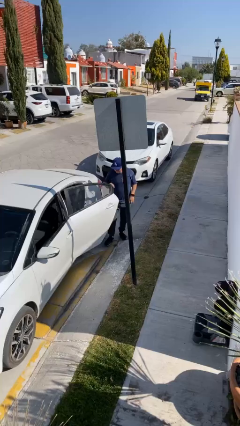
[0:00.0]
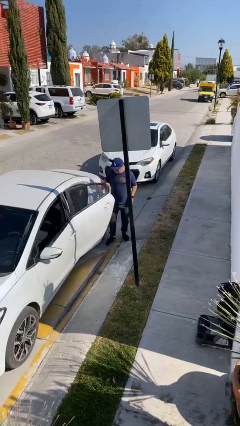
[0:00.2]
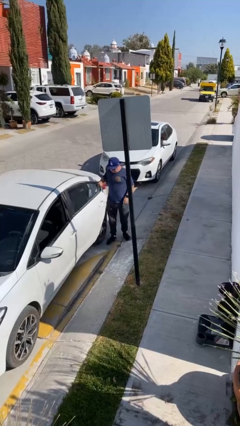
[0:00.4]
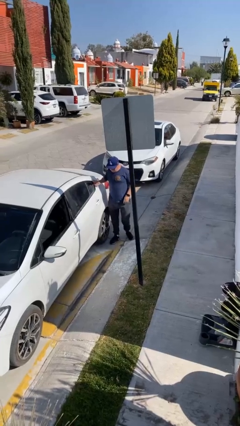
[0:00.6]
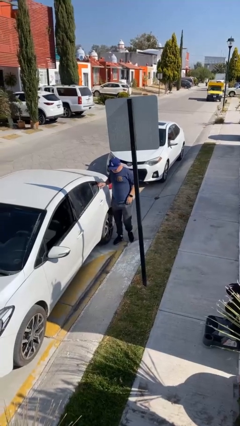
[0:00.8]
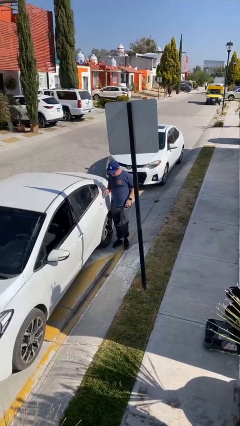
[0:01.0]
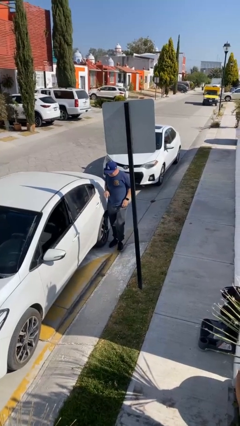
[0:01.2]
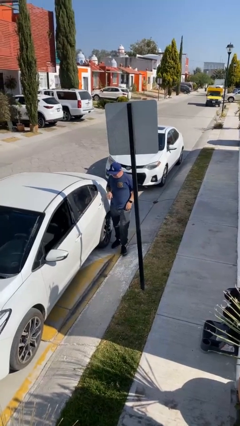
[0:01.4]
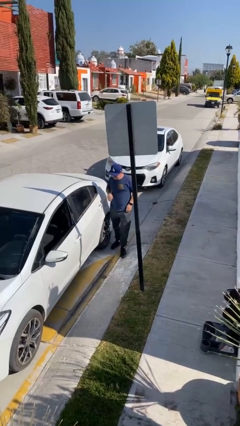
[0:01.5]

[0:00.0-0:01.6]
person closes car door

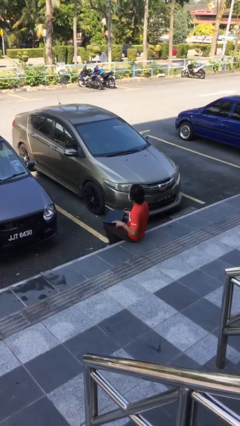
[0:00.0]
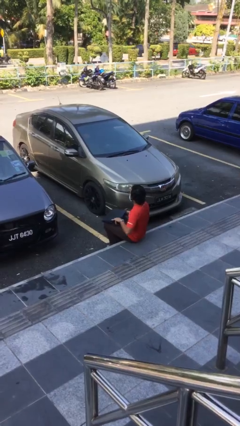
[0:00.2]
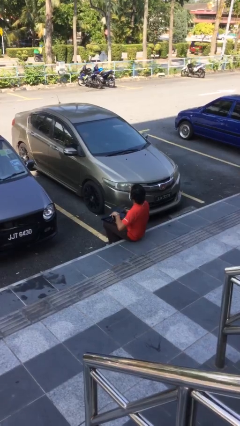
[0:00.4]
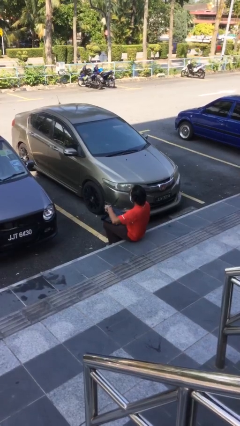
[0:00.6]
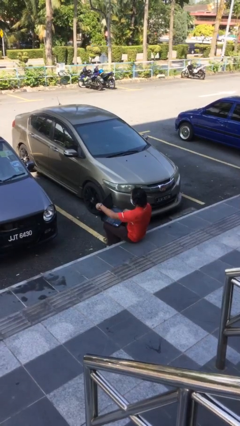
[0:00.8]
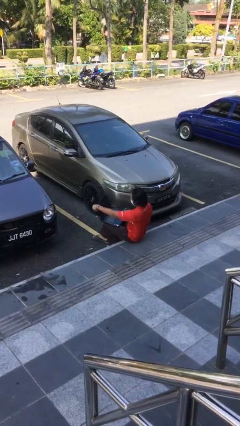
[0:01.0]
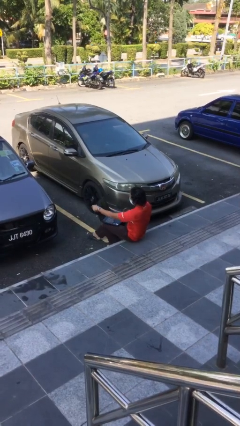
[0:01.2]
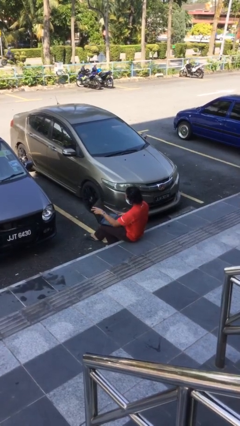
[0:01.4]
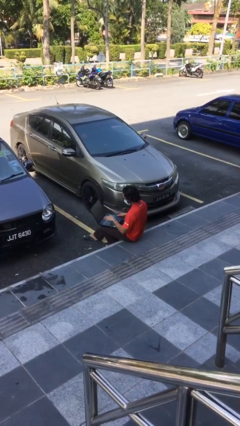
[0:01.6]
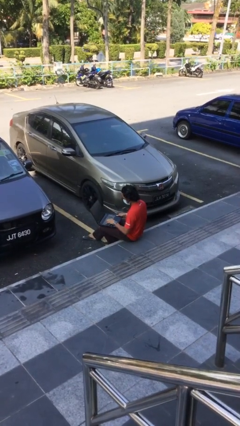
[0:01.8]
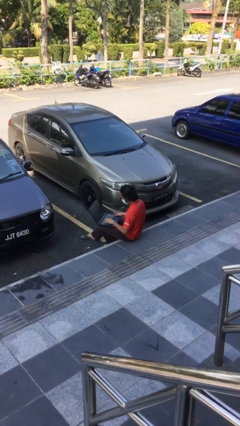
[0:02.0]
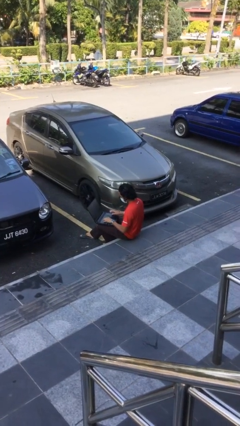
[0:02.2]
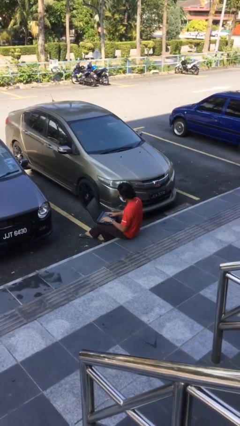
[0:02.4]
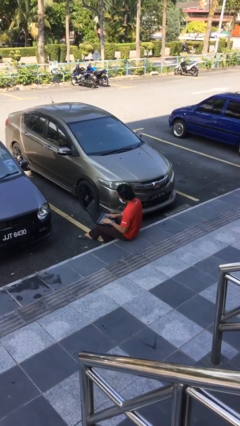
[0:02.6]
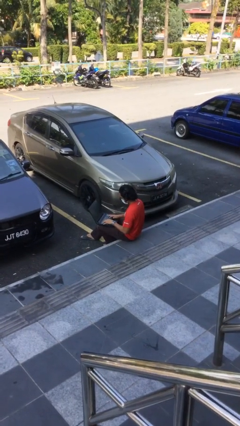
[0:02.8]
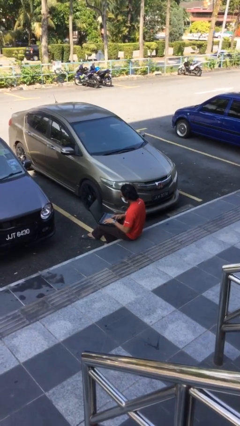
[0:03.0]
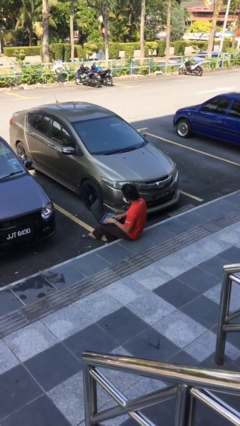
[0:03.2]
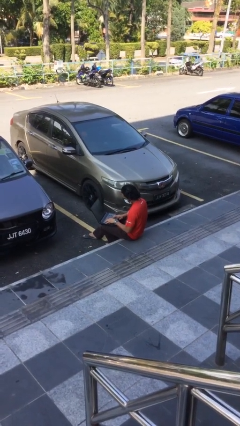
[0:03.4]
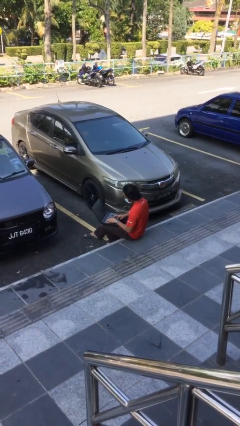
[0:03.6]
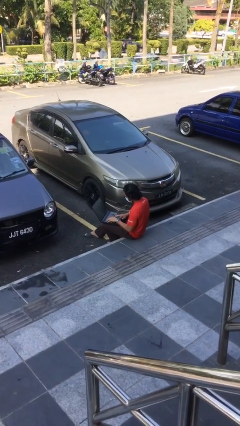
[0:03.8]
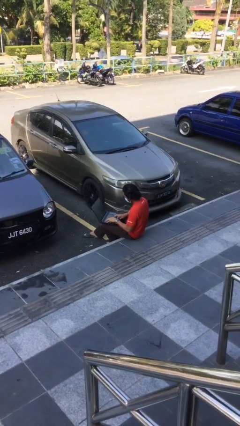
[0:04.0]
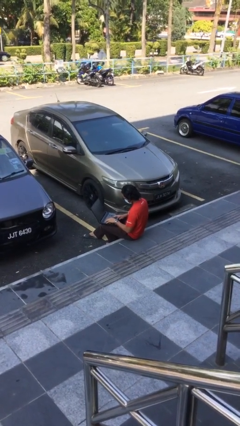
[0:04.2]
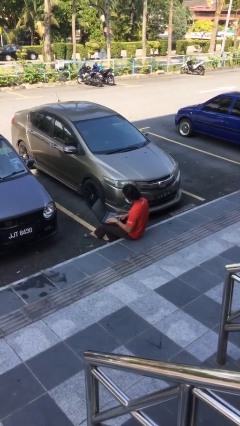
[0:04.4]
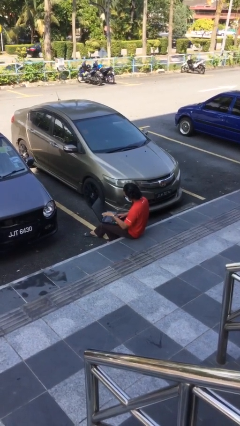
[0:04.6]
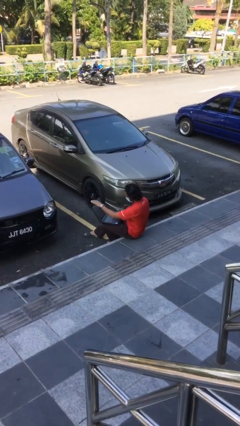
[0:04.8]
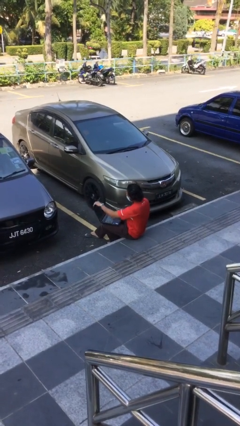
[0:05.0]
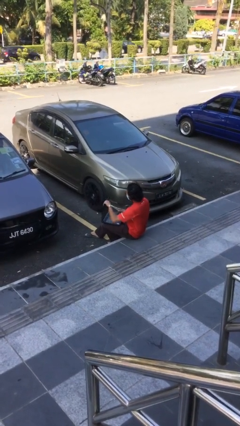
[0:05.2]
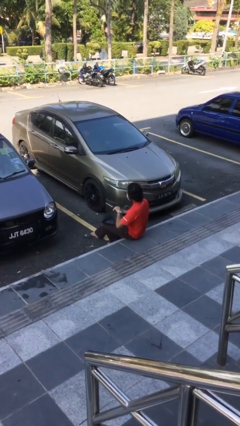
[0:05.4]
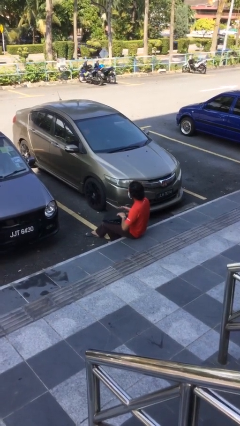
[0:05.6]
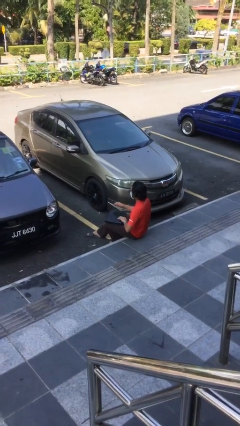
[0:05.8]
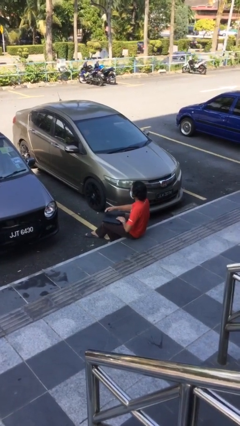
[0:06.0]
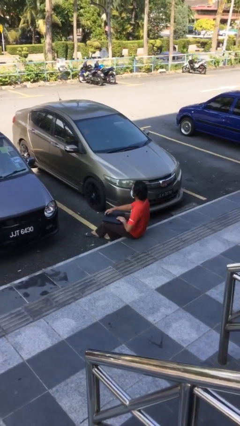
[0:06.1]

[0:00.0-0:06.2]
person interacts with laptop

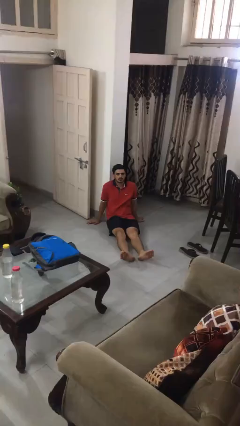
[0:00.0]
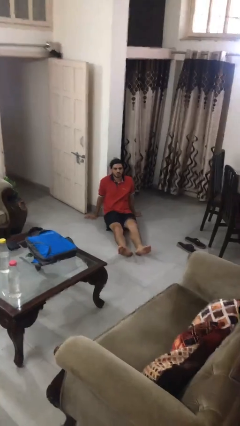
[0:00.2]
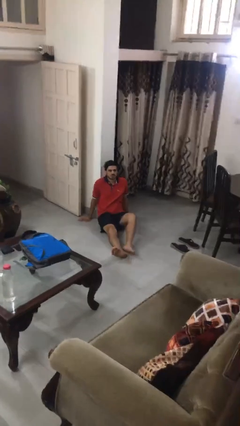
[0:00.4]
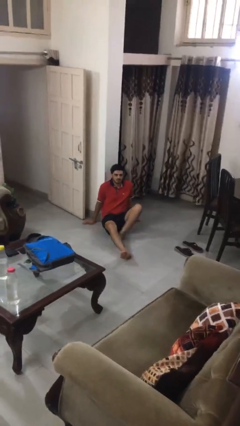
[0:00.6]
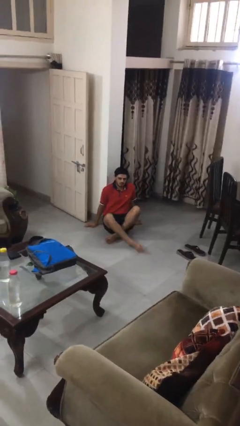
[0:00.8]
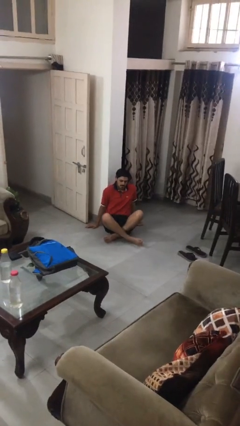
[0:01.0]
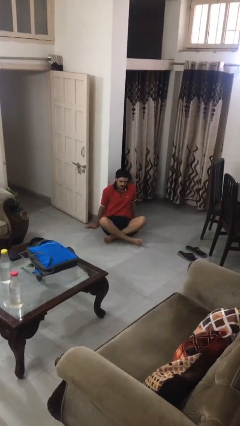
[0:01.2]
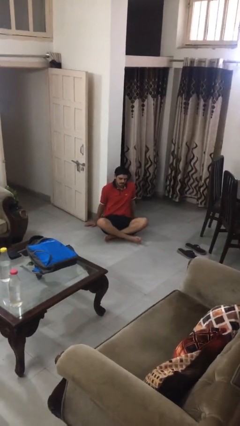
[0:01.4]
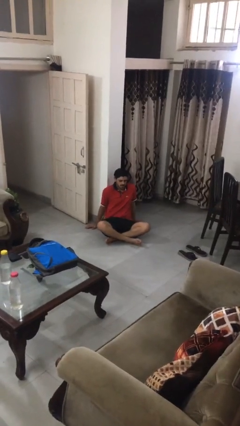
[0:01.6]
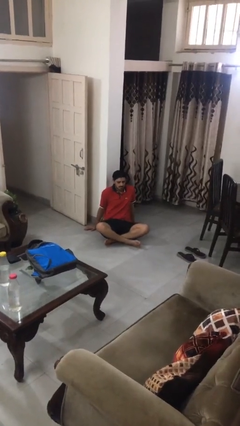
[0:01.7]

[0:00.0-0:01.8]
person crosses legs

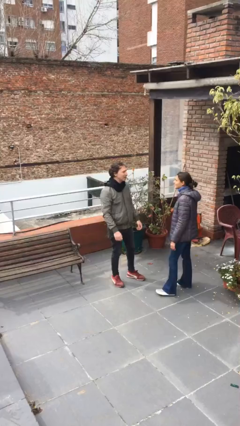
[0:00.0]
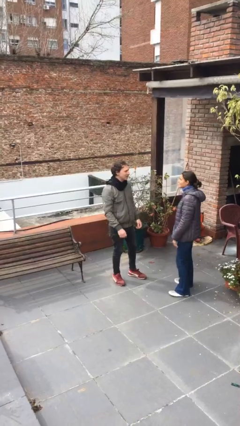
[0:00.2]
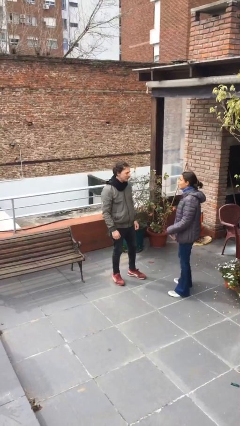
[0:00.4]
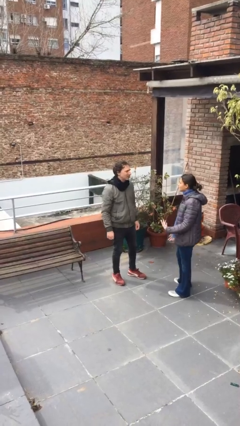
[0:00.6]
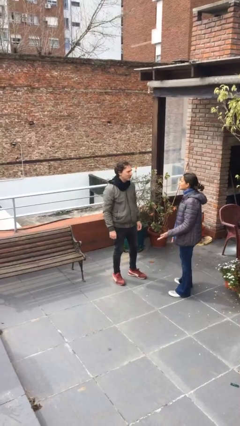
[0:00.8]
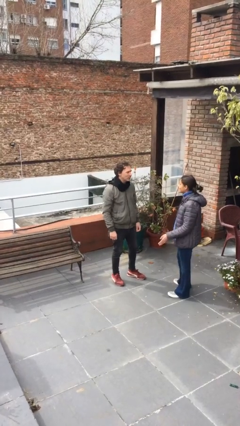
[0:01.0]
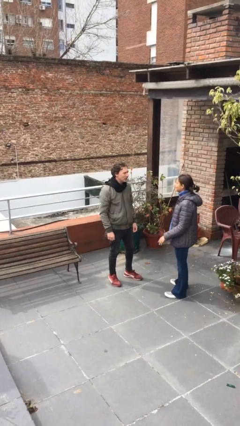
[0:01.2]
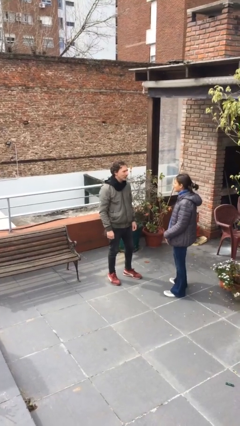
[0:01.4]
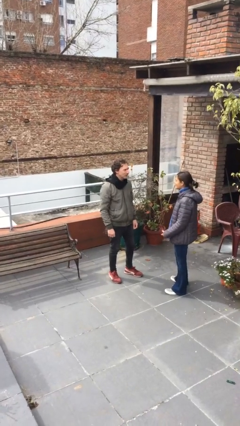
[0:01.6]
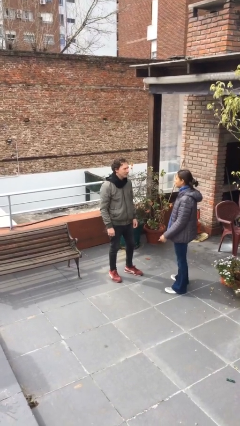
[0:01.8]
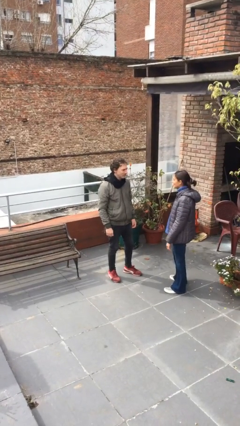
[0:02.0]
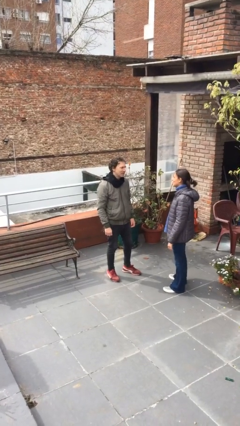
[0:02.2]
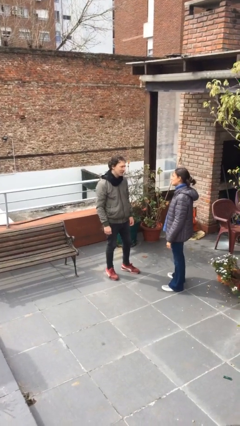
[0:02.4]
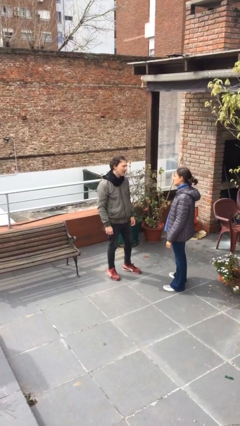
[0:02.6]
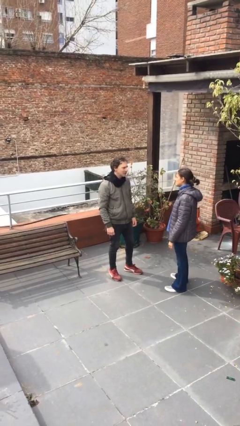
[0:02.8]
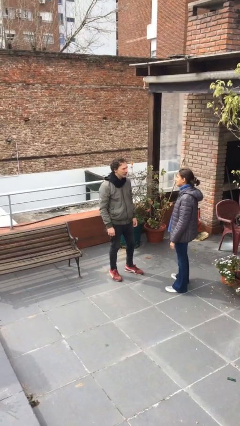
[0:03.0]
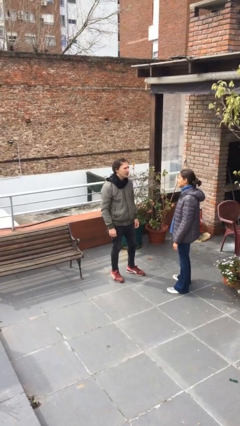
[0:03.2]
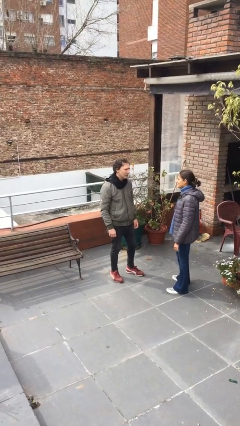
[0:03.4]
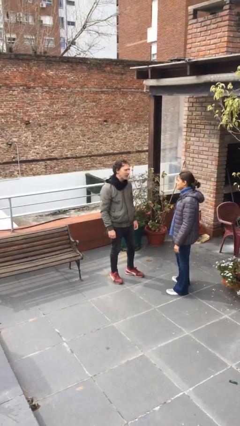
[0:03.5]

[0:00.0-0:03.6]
person talks to person

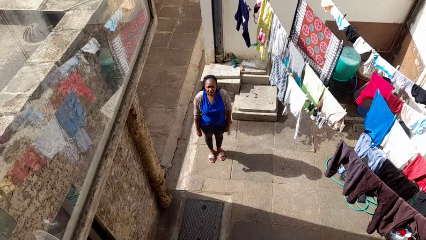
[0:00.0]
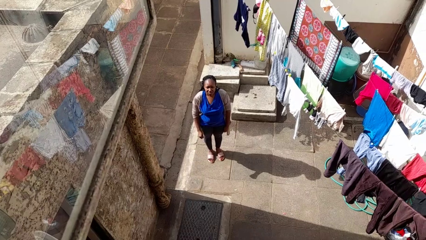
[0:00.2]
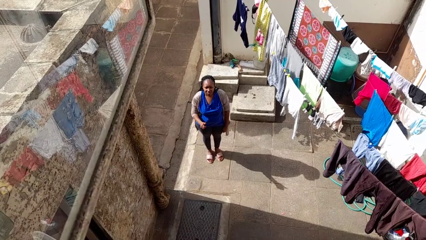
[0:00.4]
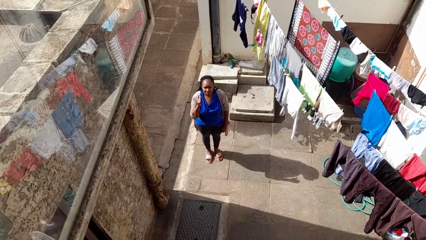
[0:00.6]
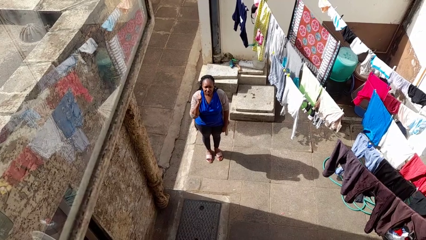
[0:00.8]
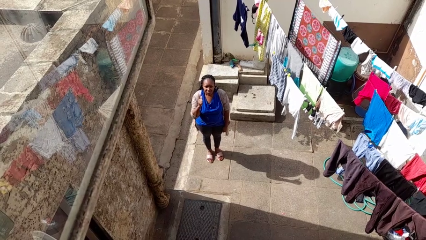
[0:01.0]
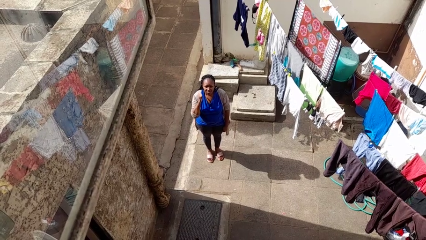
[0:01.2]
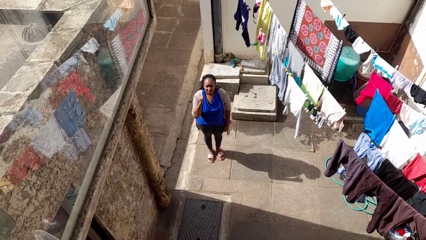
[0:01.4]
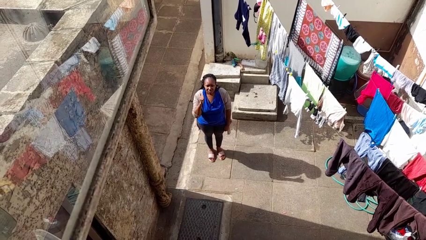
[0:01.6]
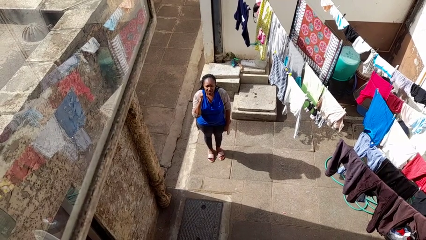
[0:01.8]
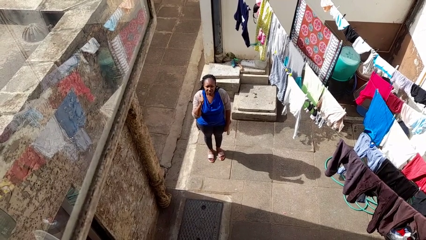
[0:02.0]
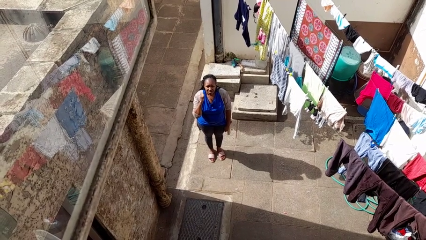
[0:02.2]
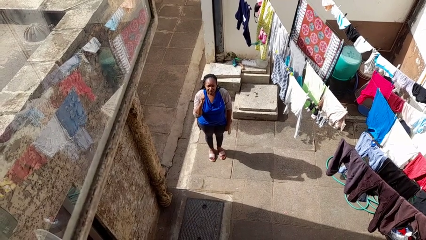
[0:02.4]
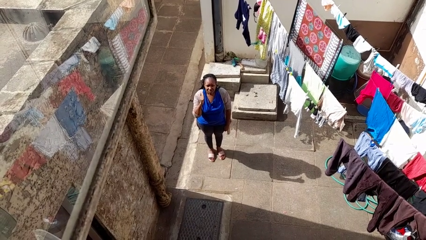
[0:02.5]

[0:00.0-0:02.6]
person gestures behind me

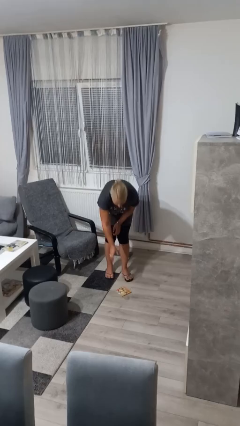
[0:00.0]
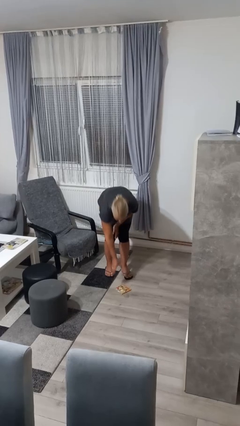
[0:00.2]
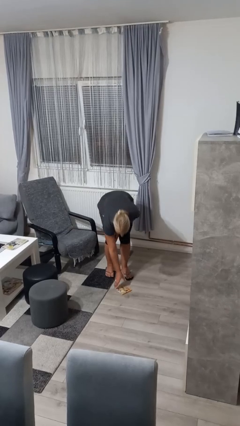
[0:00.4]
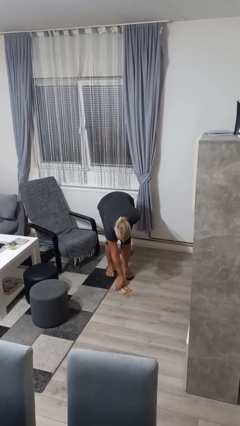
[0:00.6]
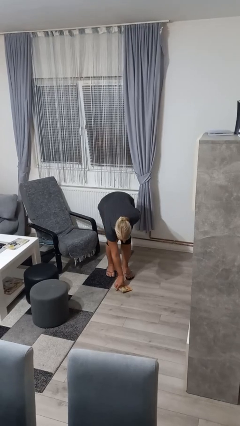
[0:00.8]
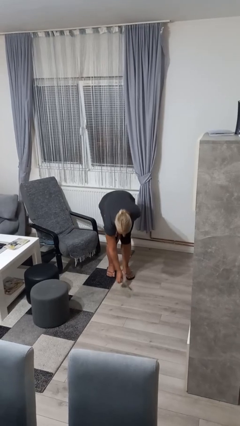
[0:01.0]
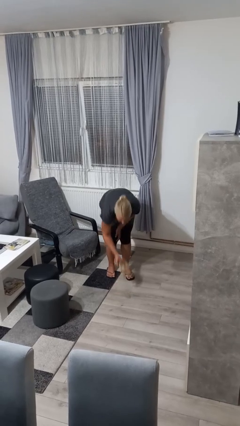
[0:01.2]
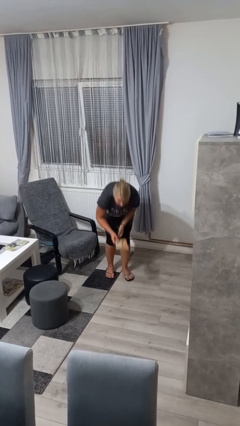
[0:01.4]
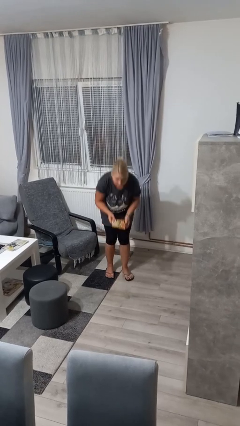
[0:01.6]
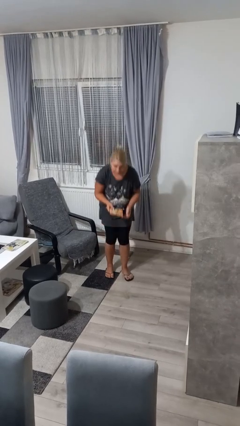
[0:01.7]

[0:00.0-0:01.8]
person picks up object from floor

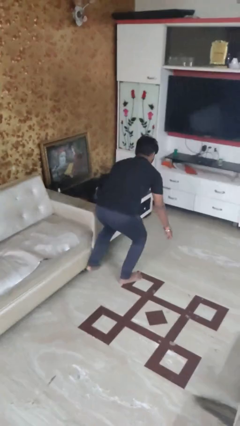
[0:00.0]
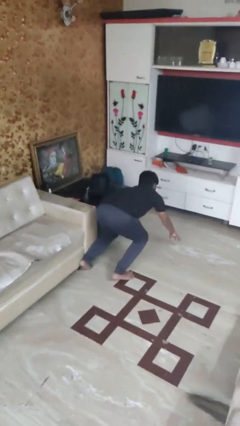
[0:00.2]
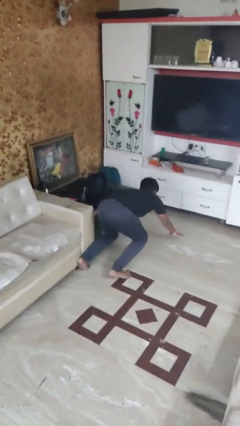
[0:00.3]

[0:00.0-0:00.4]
person trips on object on floor
